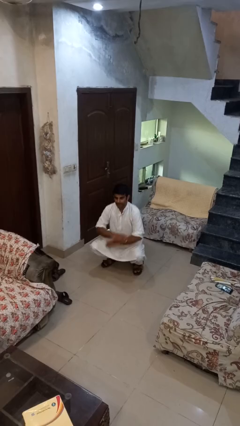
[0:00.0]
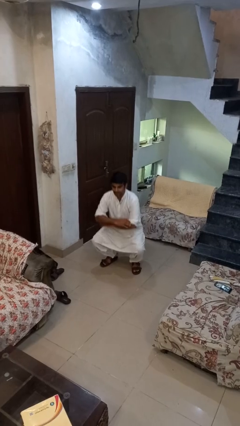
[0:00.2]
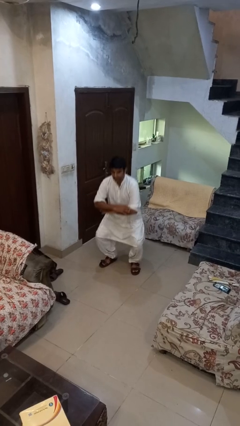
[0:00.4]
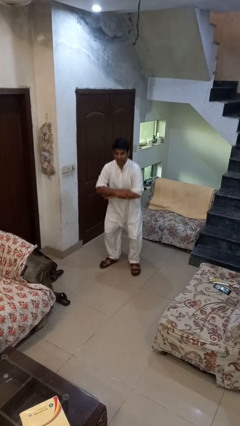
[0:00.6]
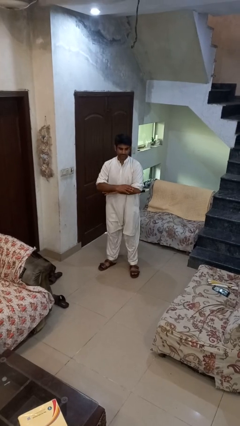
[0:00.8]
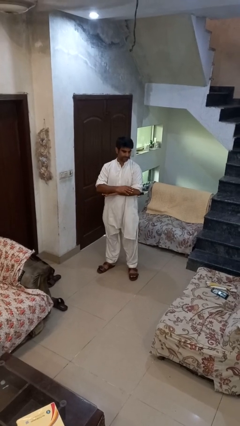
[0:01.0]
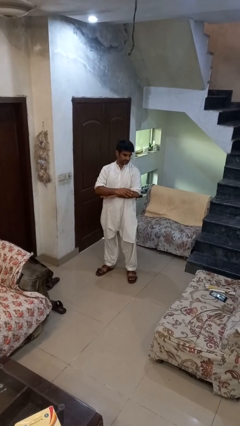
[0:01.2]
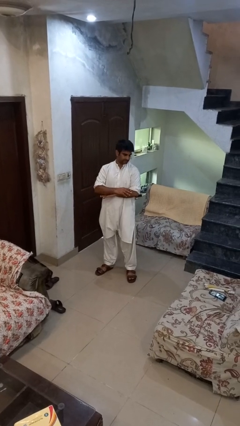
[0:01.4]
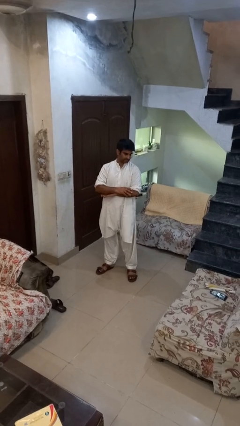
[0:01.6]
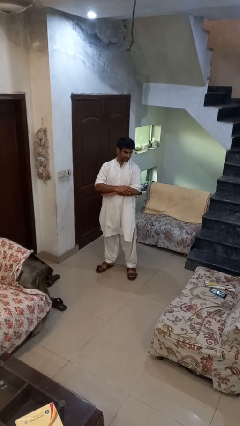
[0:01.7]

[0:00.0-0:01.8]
person stands up

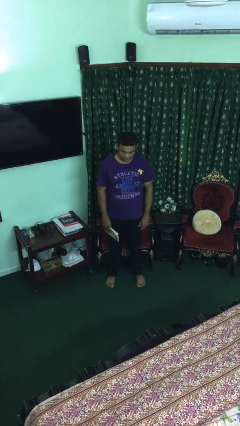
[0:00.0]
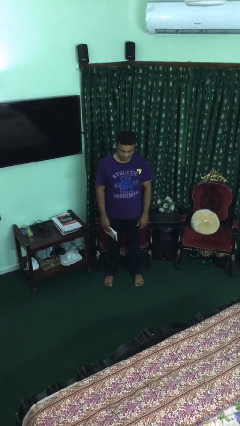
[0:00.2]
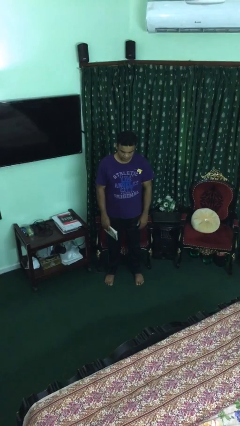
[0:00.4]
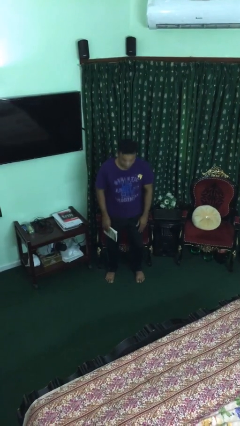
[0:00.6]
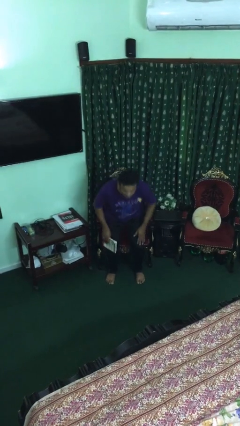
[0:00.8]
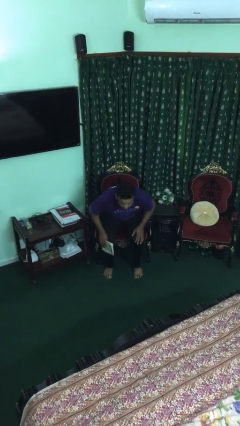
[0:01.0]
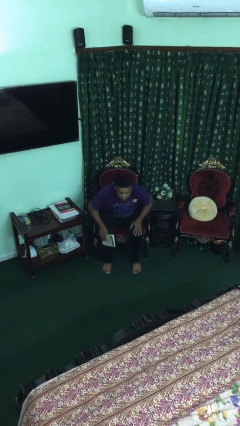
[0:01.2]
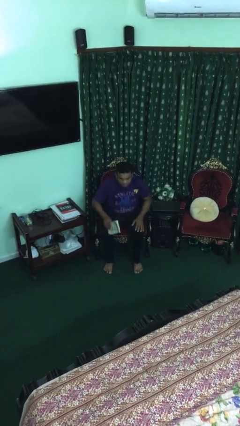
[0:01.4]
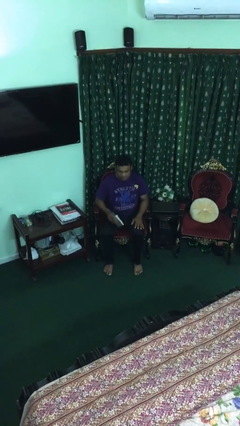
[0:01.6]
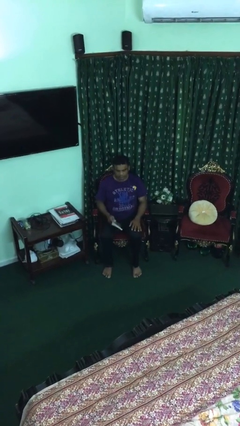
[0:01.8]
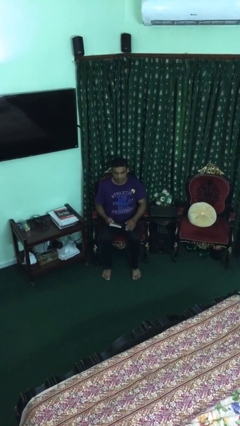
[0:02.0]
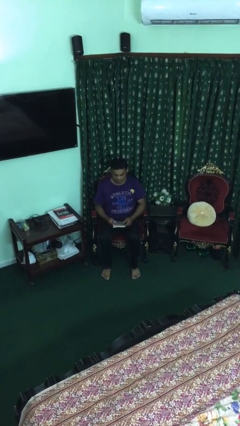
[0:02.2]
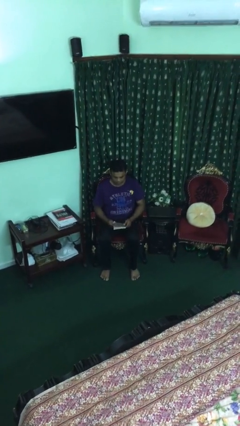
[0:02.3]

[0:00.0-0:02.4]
person sits down

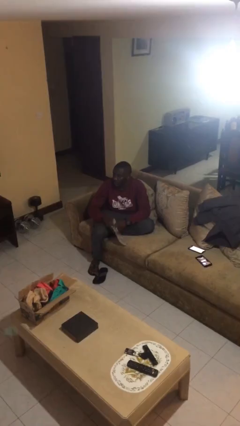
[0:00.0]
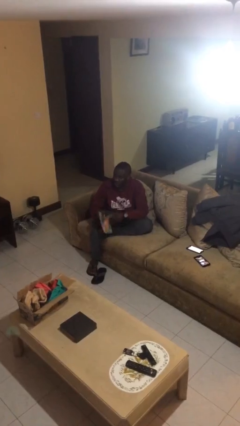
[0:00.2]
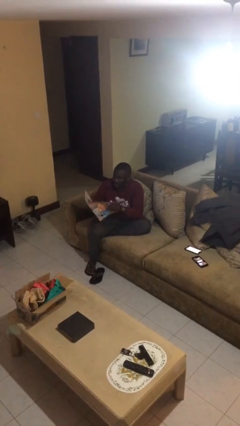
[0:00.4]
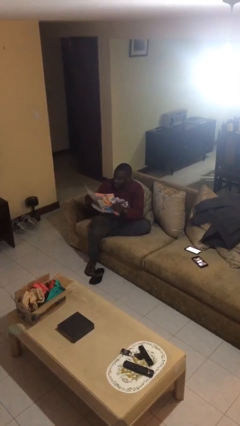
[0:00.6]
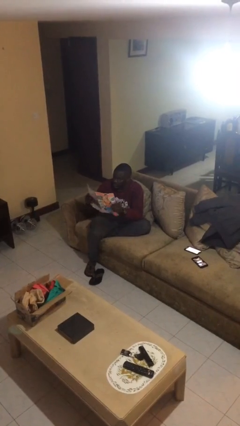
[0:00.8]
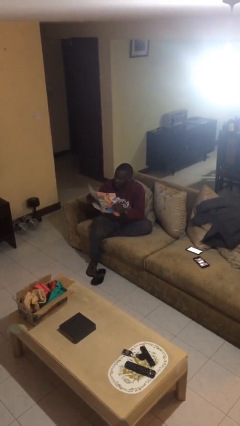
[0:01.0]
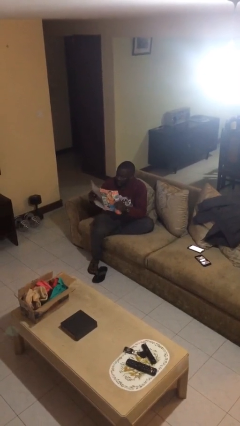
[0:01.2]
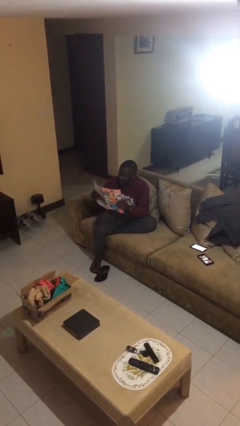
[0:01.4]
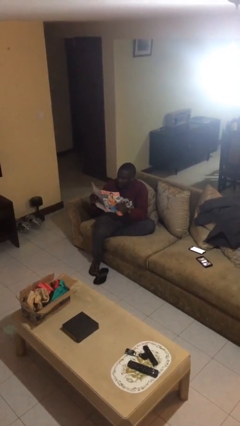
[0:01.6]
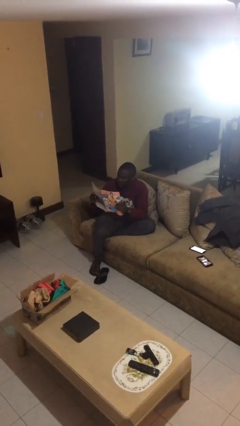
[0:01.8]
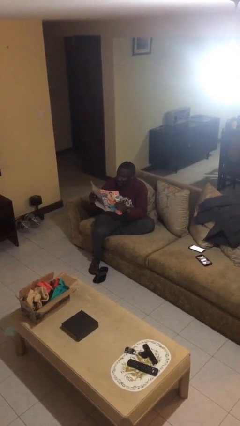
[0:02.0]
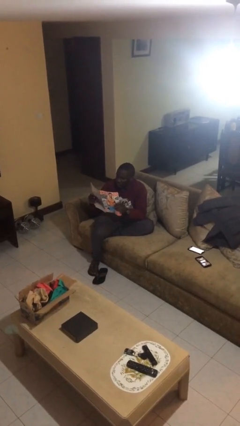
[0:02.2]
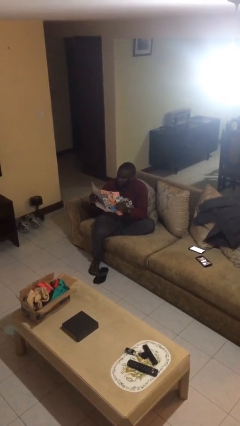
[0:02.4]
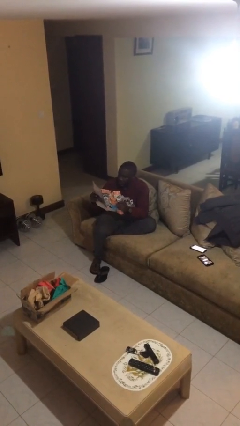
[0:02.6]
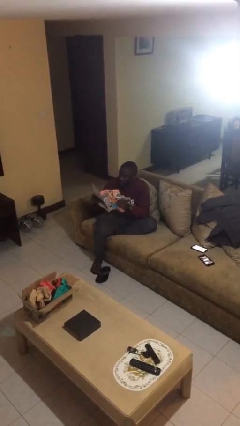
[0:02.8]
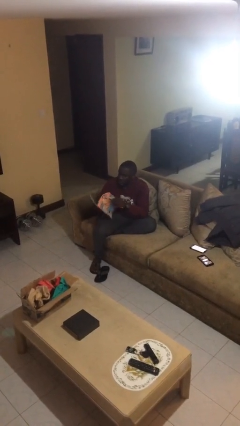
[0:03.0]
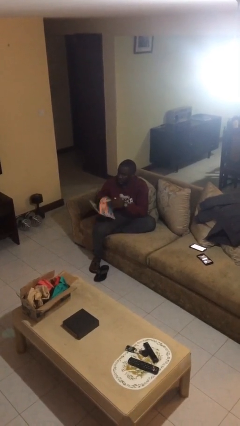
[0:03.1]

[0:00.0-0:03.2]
person reads magazine

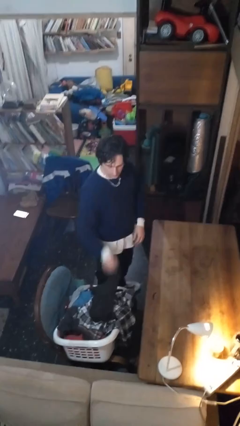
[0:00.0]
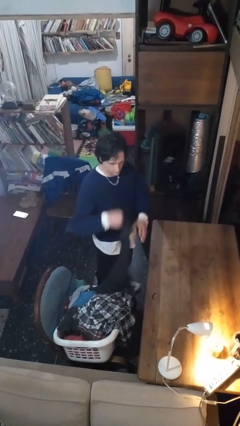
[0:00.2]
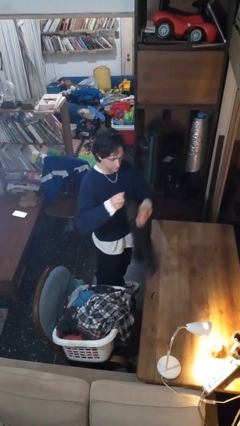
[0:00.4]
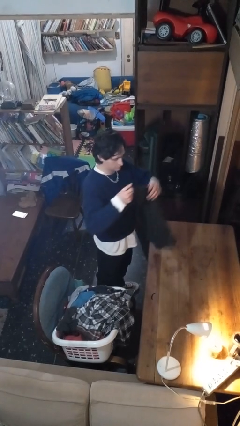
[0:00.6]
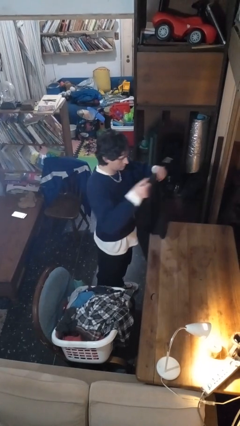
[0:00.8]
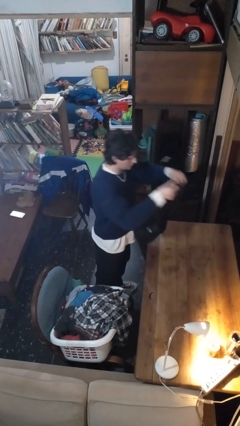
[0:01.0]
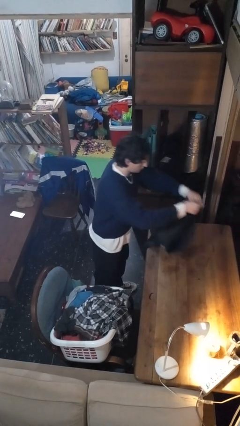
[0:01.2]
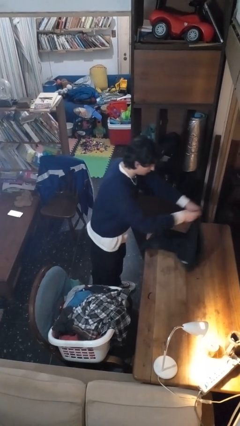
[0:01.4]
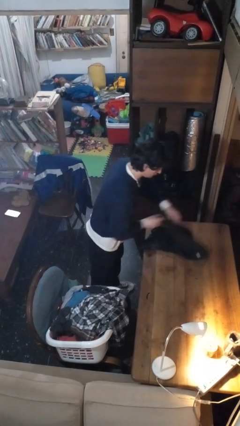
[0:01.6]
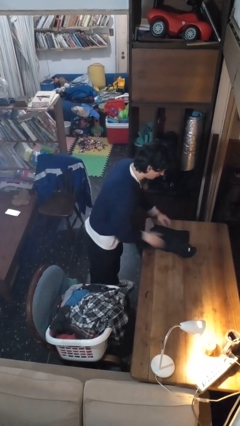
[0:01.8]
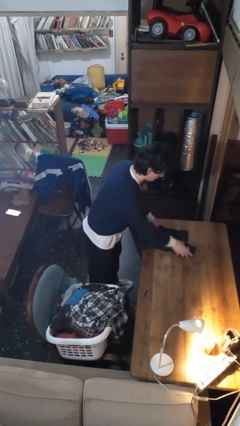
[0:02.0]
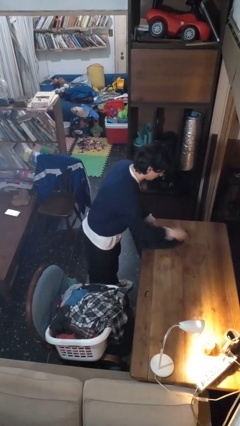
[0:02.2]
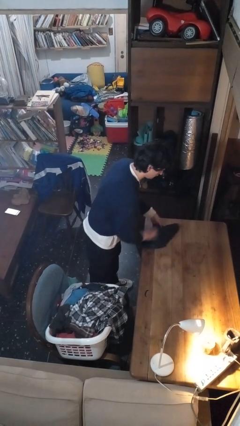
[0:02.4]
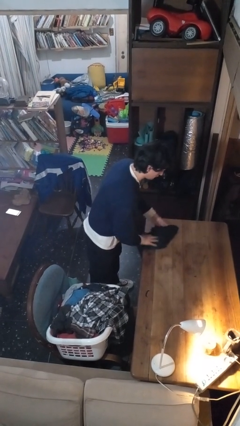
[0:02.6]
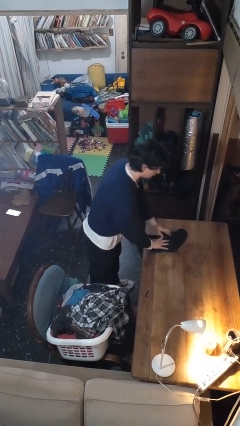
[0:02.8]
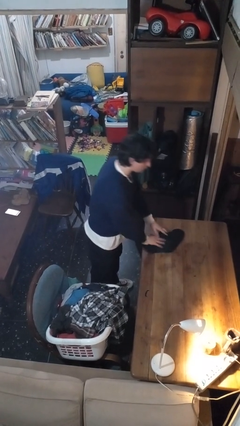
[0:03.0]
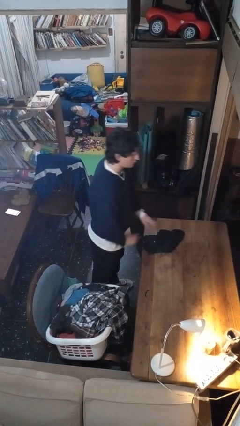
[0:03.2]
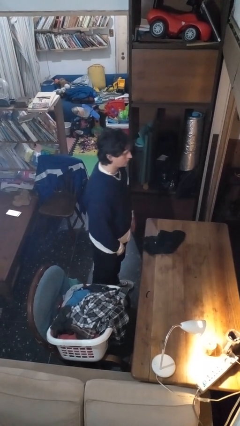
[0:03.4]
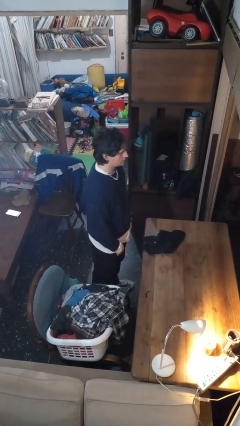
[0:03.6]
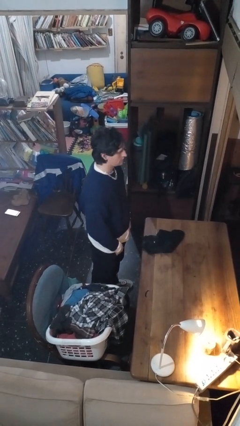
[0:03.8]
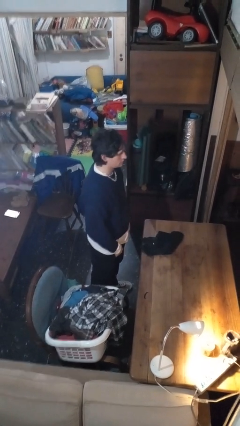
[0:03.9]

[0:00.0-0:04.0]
person folds shirt

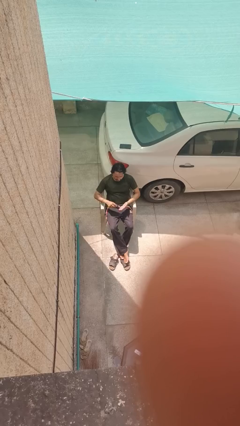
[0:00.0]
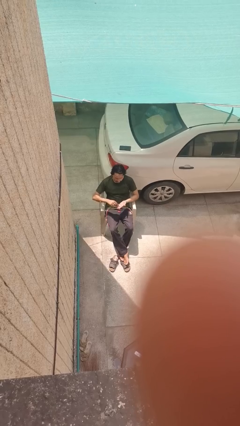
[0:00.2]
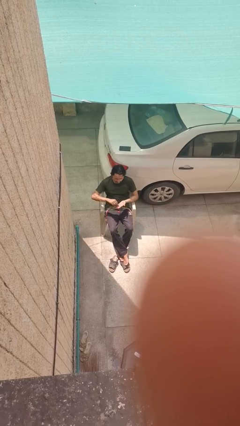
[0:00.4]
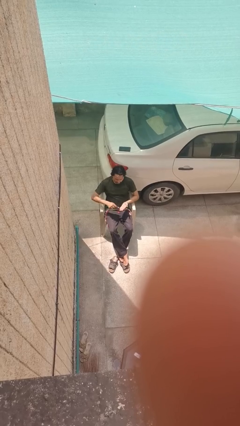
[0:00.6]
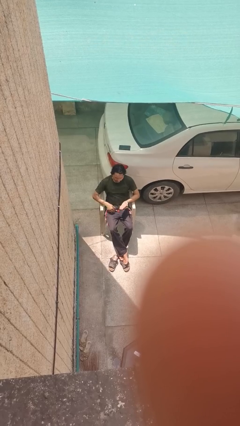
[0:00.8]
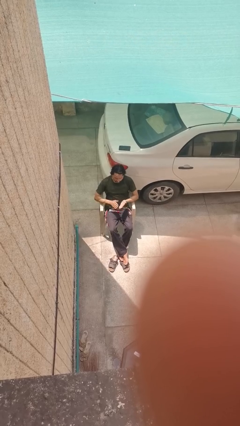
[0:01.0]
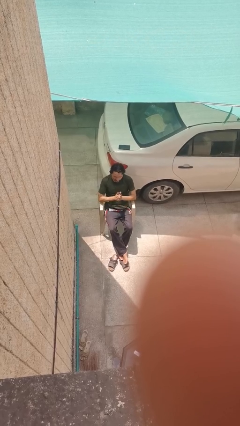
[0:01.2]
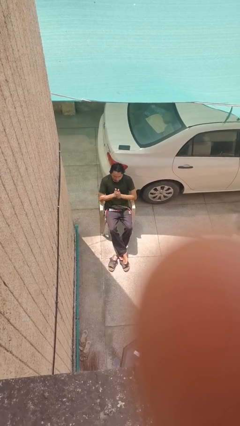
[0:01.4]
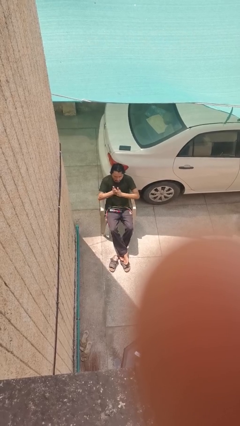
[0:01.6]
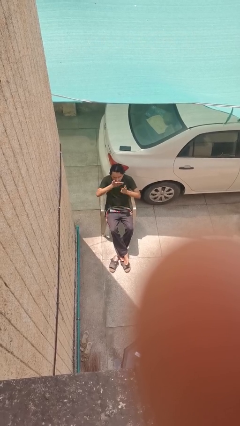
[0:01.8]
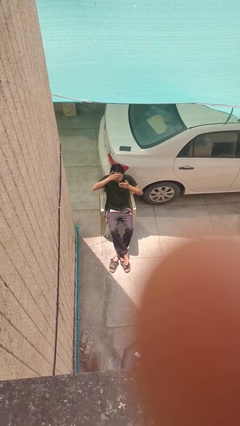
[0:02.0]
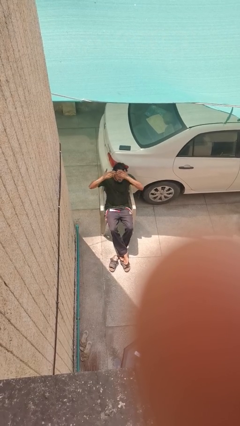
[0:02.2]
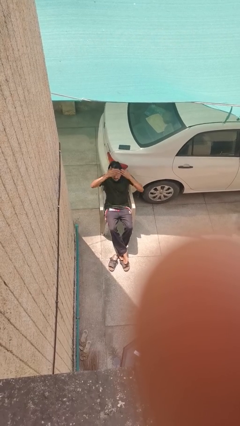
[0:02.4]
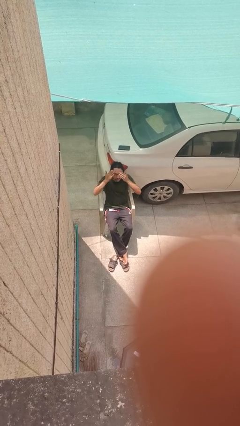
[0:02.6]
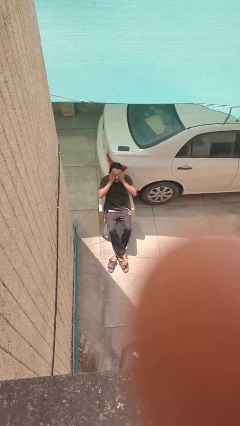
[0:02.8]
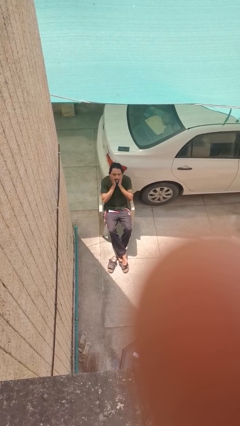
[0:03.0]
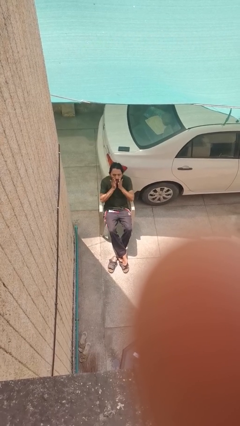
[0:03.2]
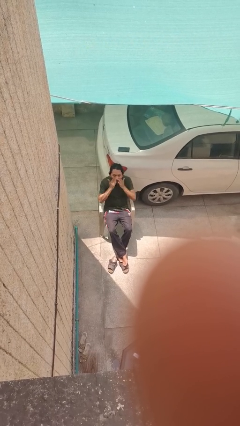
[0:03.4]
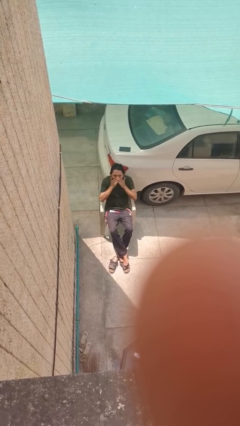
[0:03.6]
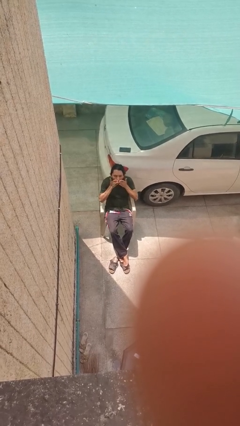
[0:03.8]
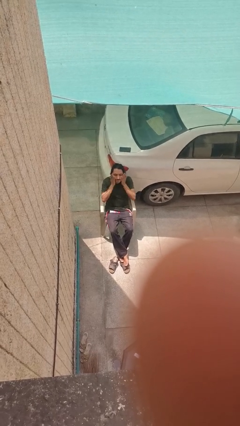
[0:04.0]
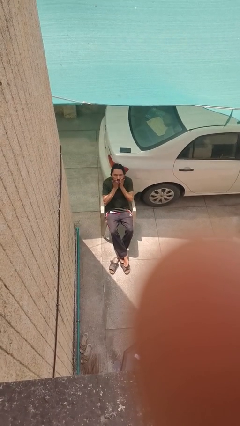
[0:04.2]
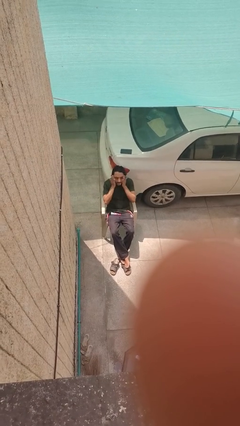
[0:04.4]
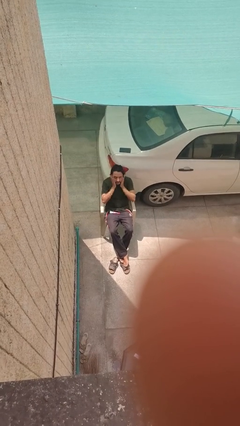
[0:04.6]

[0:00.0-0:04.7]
person applies facial moisturizer

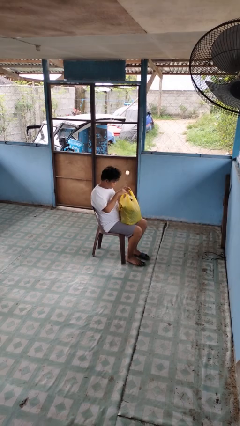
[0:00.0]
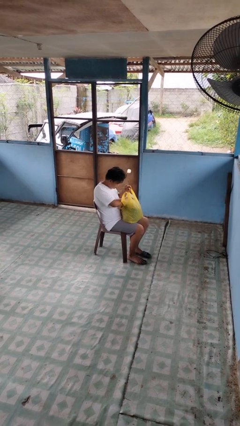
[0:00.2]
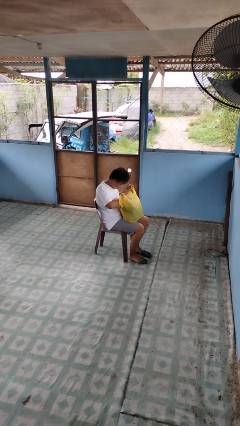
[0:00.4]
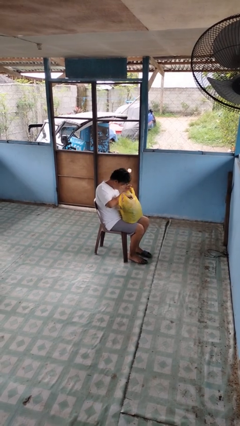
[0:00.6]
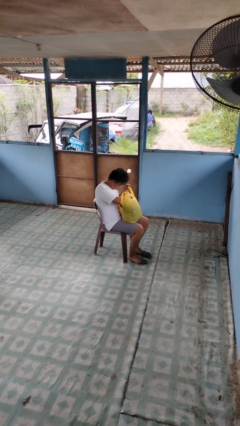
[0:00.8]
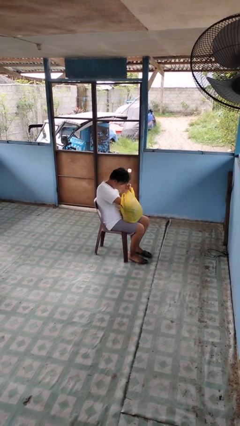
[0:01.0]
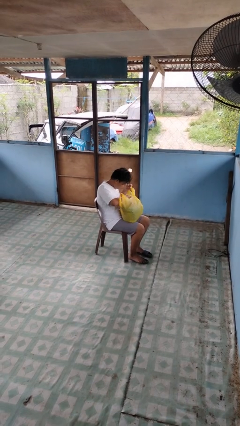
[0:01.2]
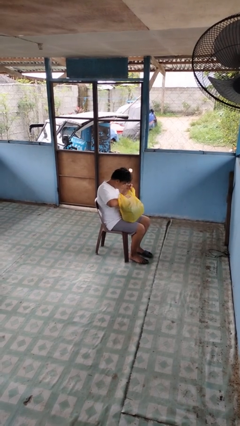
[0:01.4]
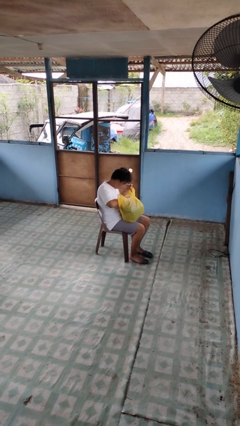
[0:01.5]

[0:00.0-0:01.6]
person searches in bag
